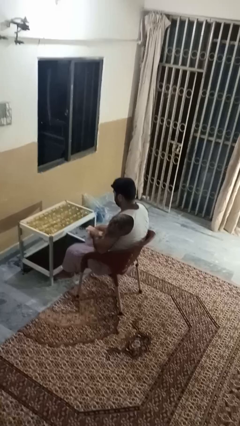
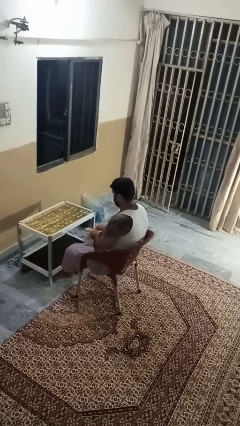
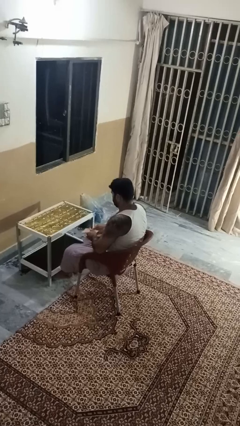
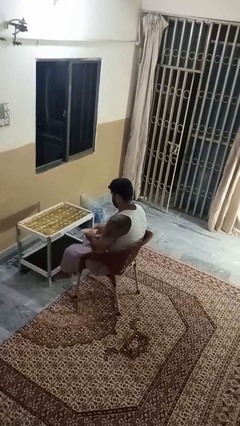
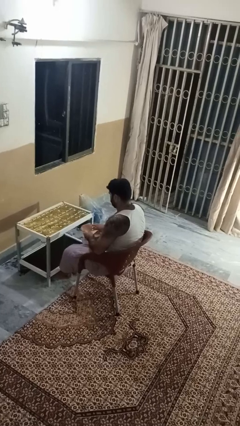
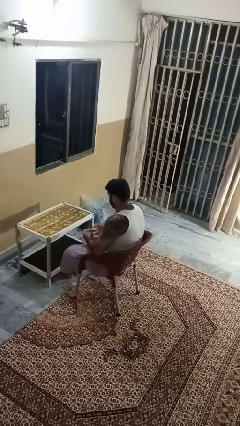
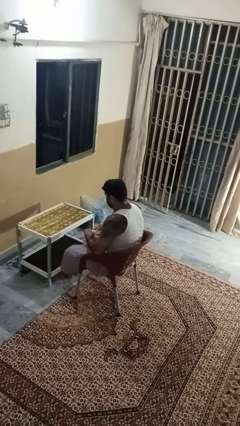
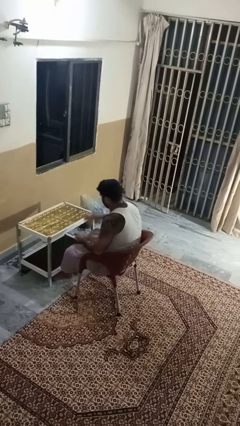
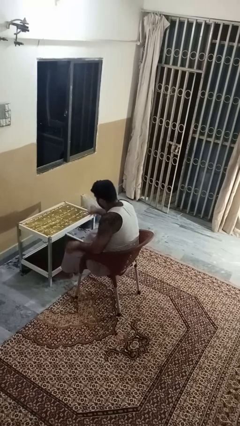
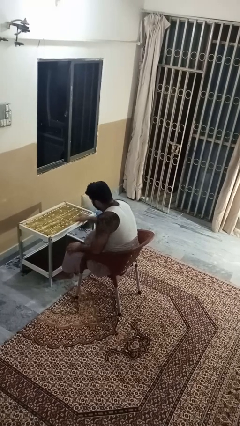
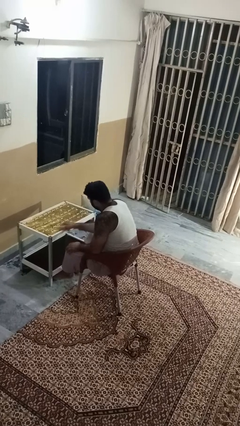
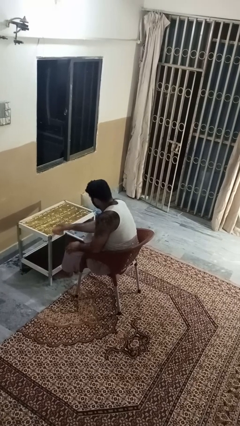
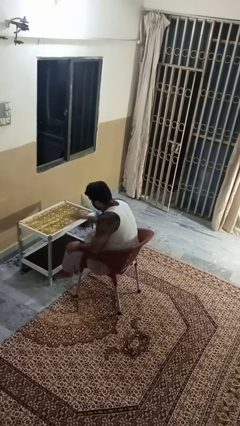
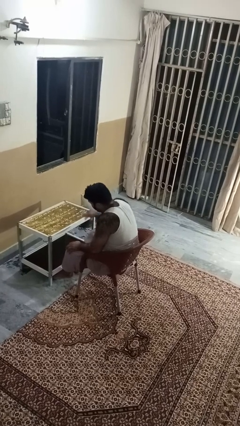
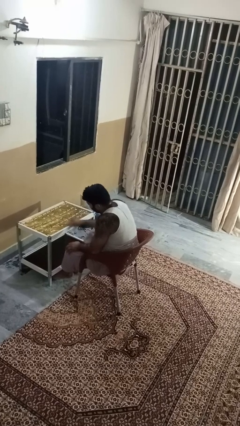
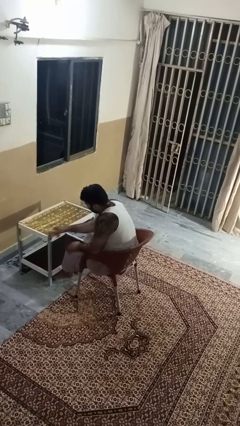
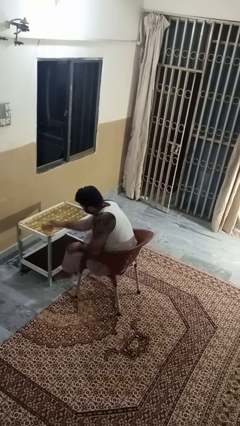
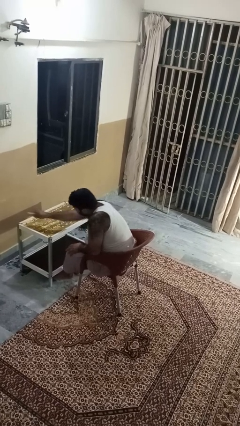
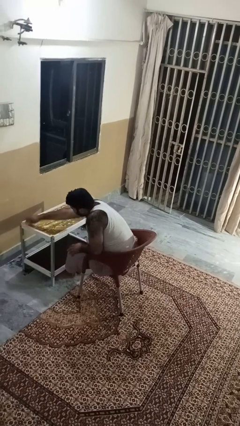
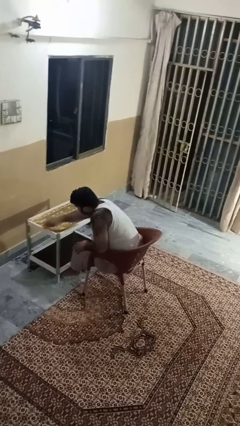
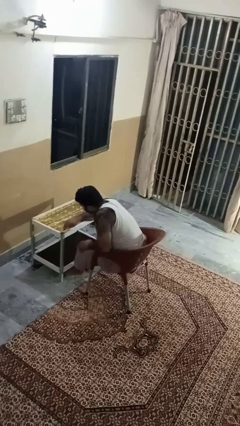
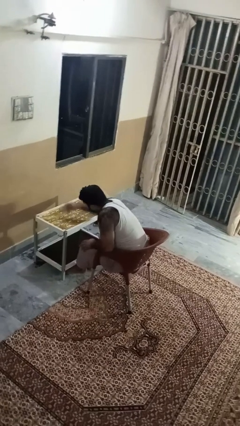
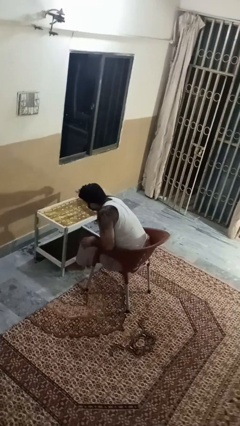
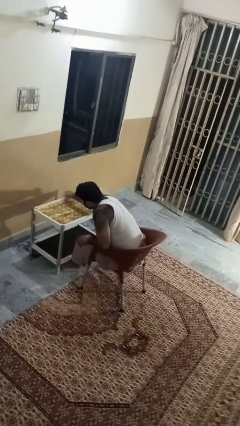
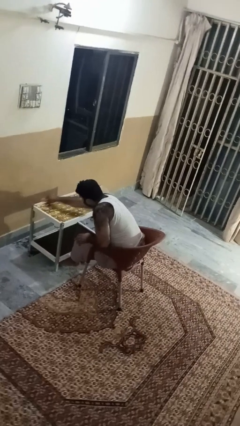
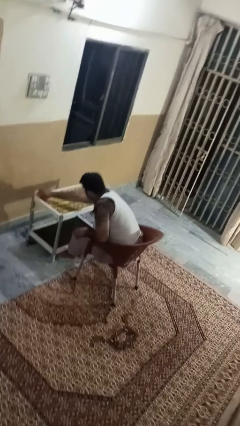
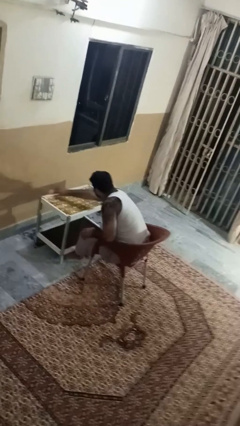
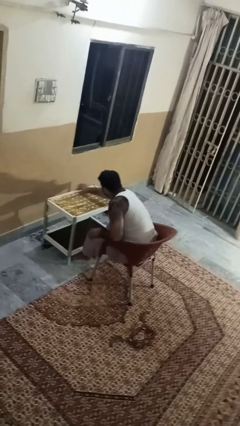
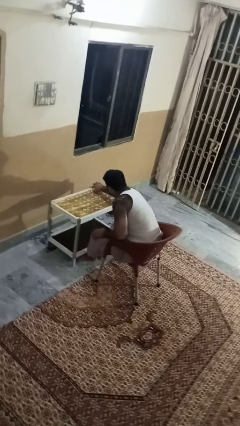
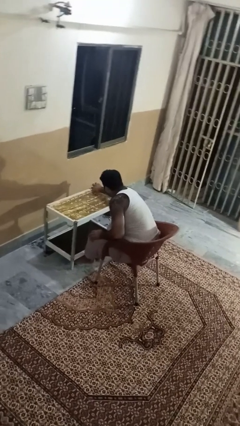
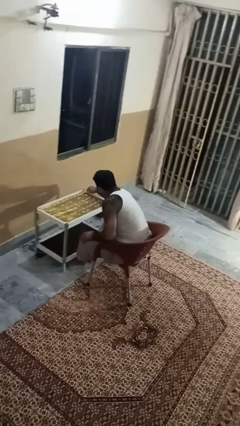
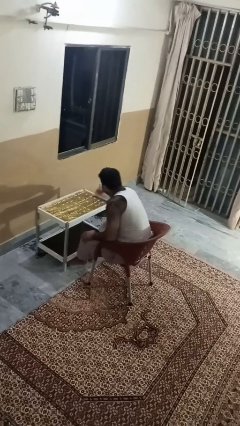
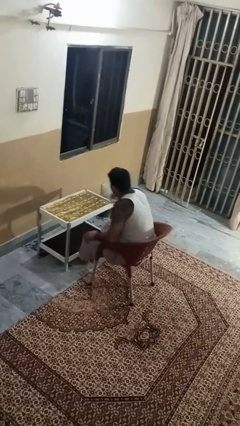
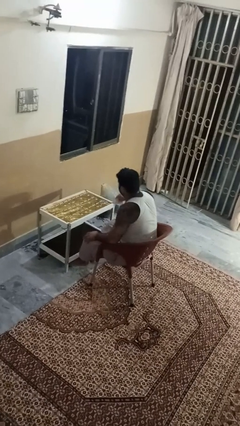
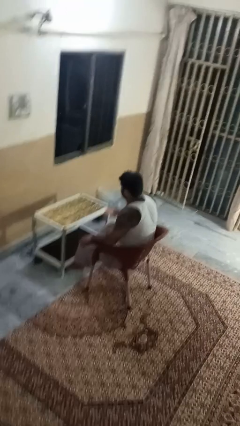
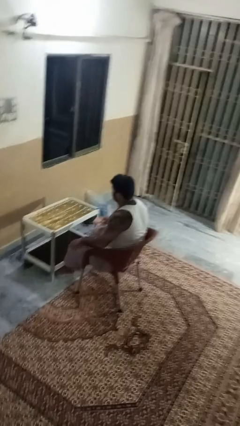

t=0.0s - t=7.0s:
person cleans table with rag

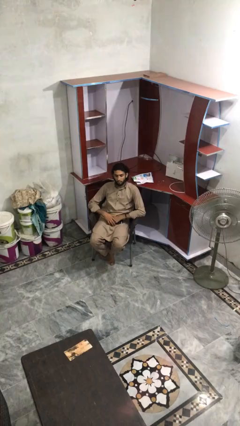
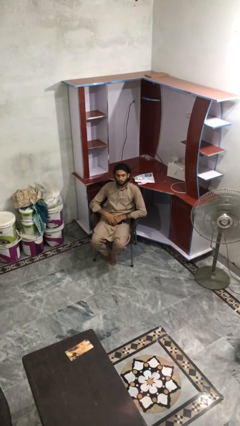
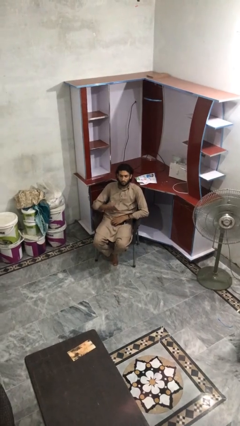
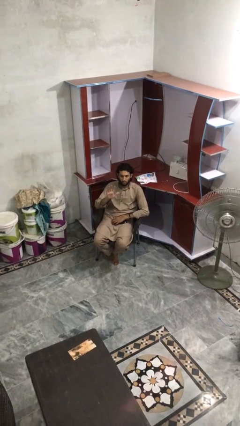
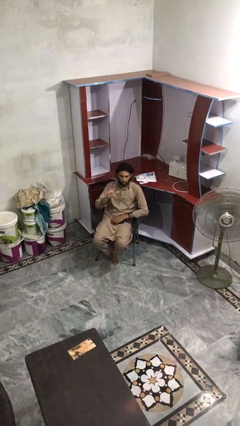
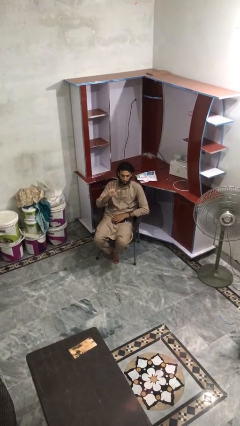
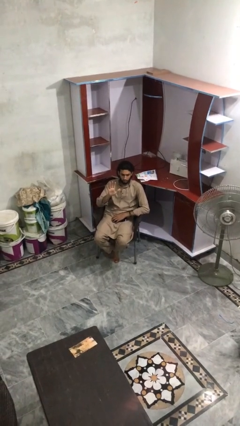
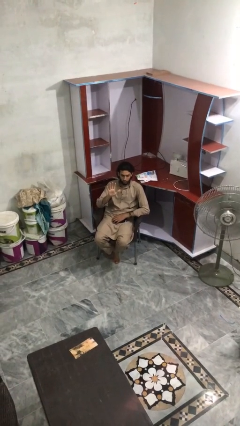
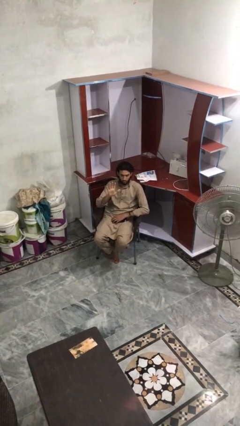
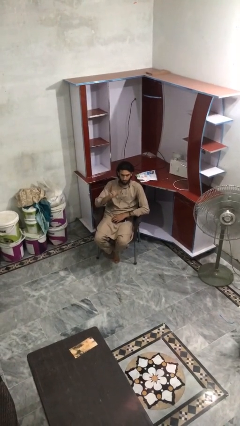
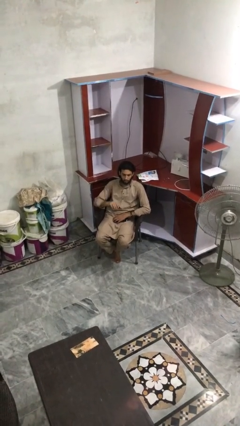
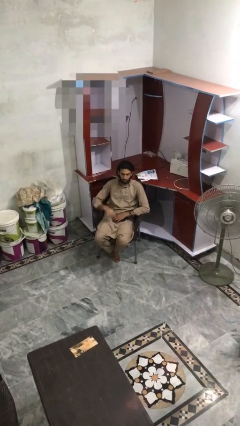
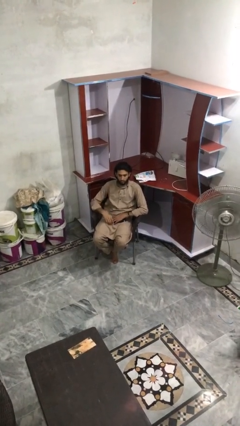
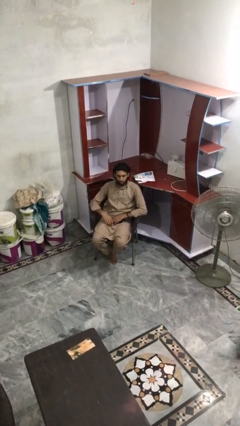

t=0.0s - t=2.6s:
person gestures number five

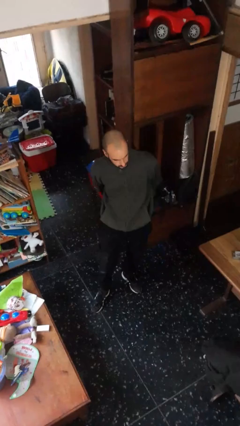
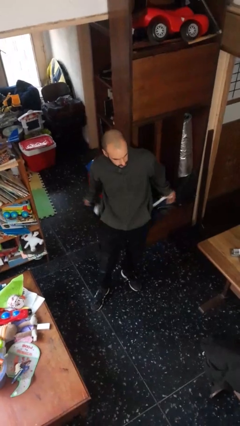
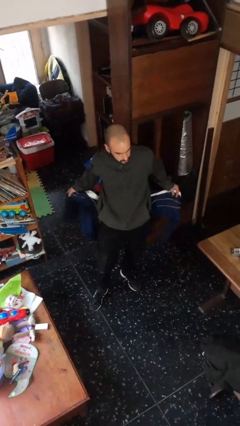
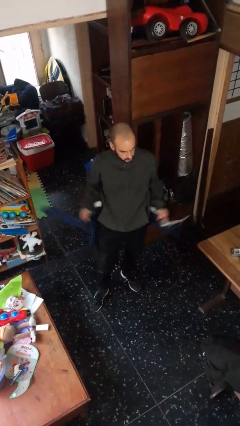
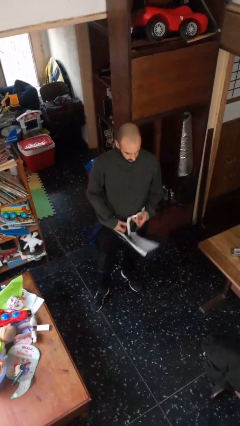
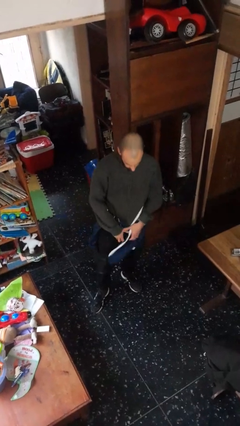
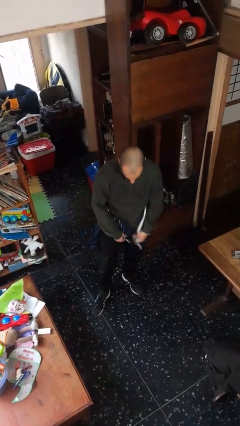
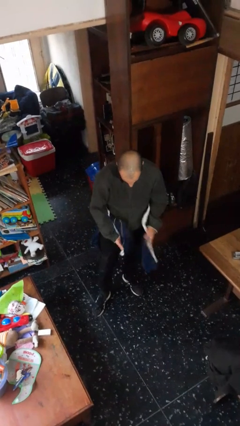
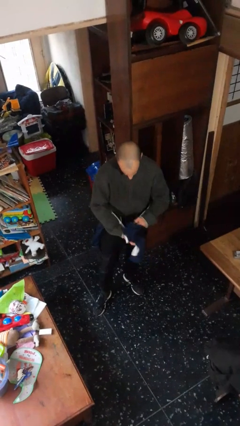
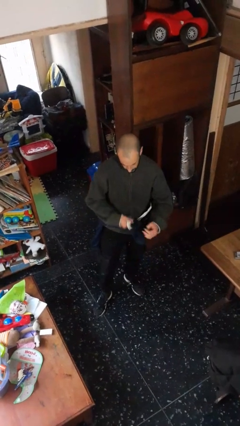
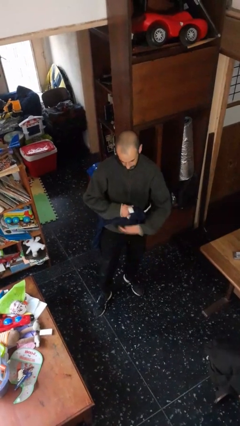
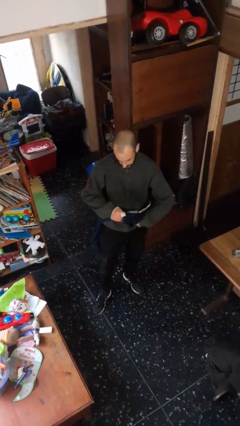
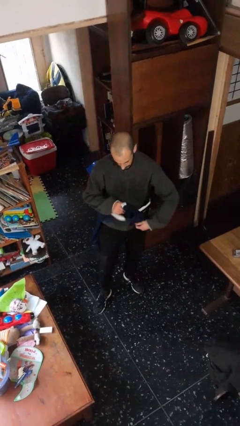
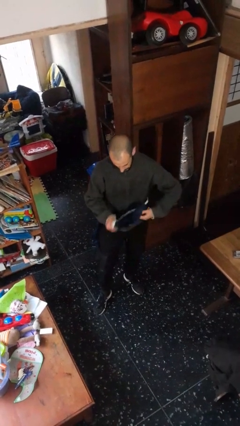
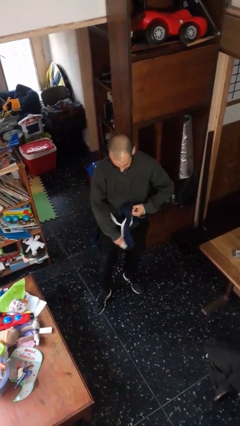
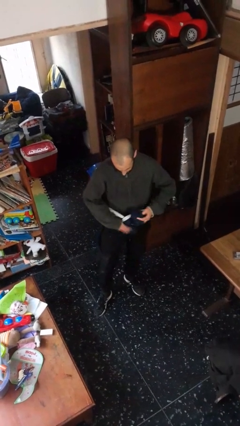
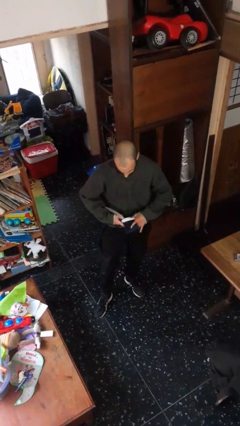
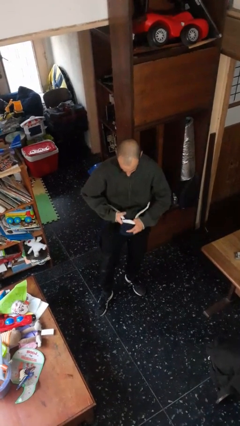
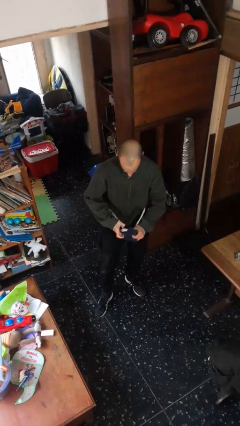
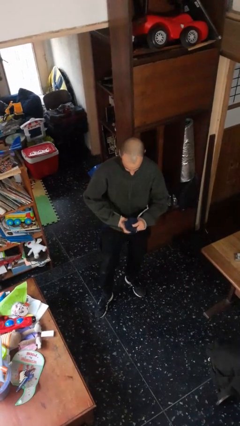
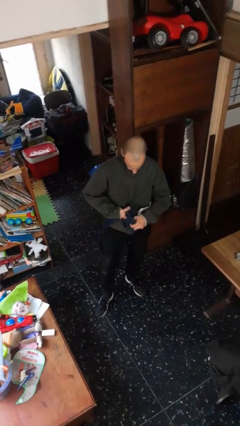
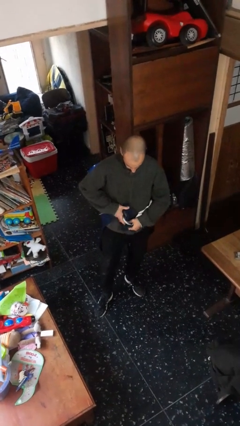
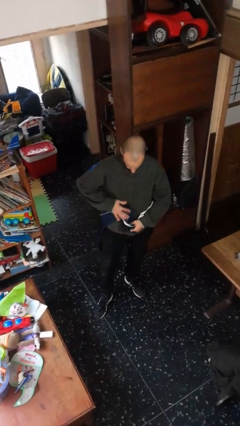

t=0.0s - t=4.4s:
person ties jacket around waist

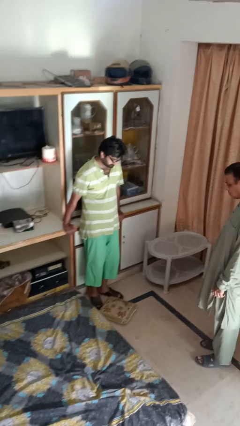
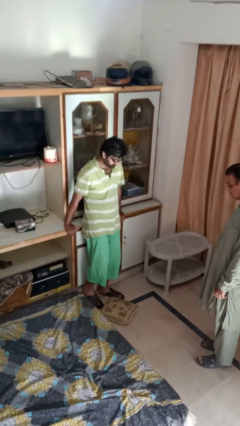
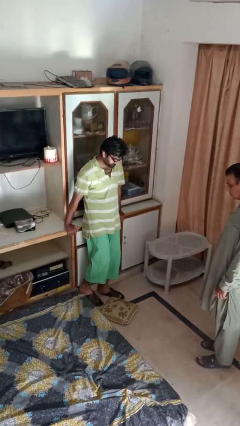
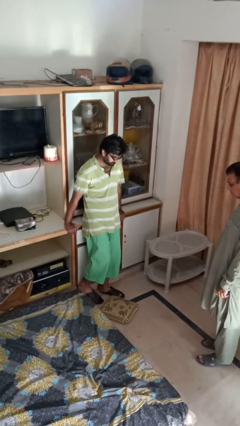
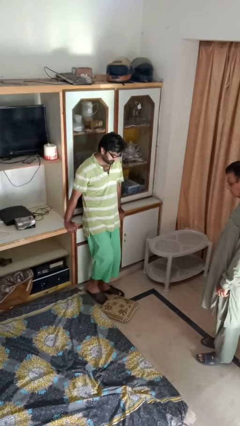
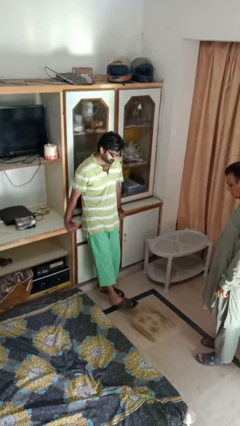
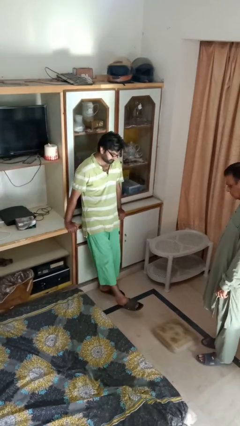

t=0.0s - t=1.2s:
person kicks object to person

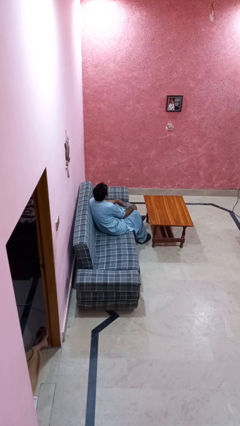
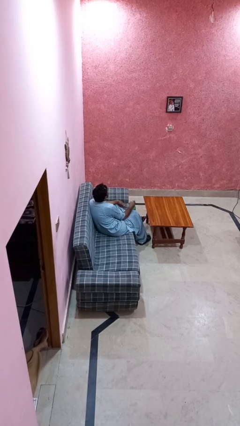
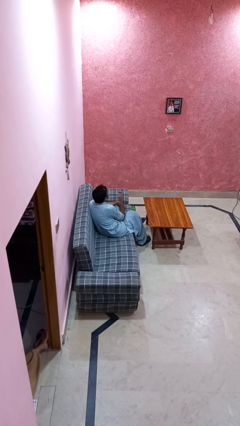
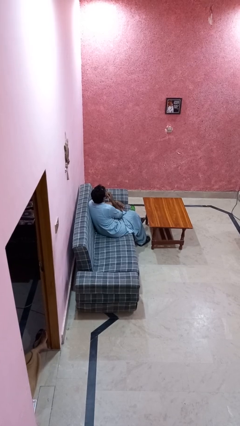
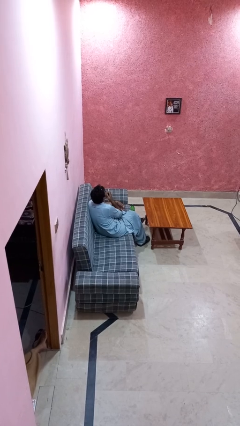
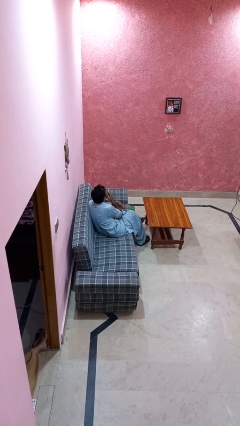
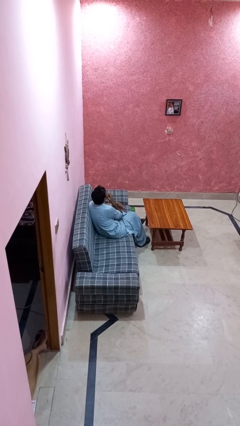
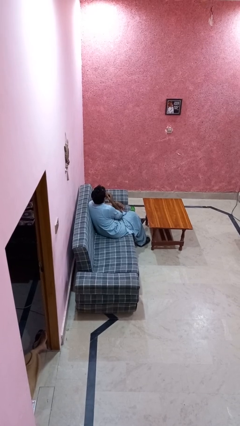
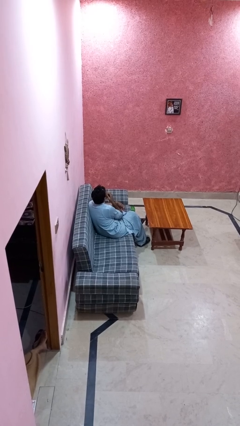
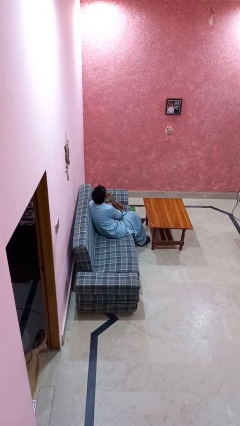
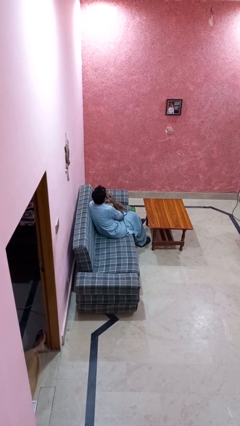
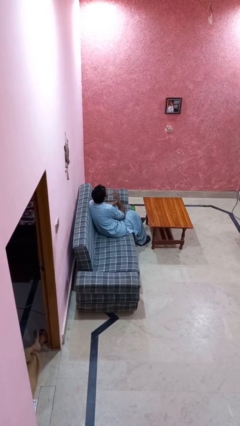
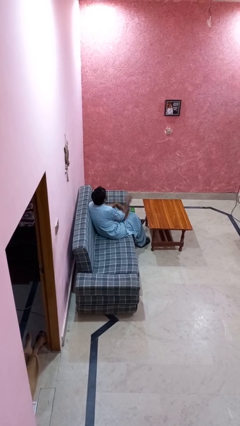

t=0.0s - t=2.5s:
person strokes chin
